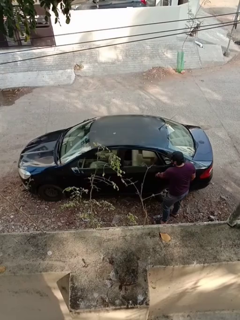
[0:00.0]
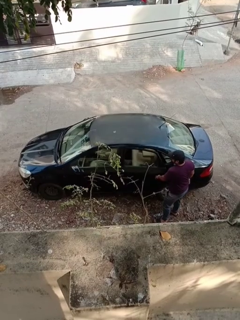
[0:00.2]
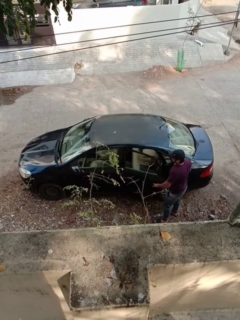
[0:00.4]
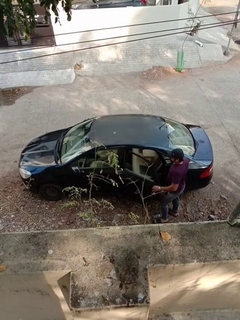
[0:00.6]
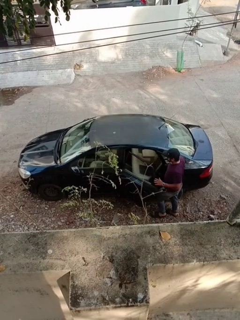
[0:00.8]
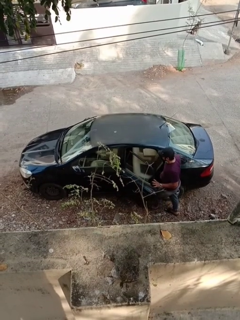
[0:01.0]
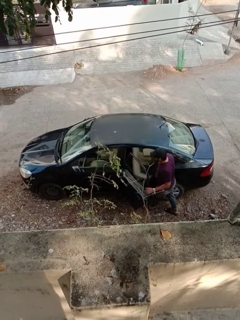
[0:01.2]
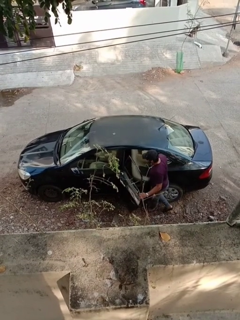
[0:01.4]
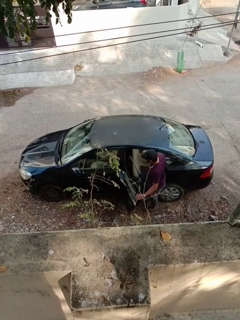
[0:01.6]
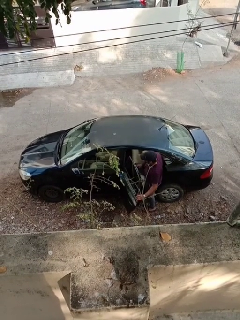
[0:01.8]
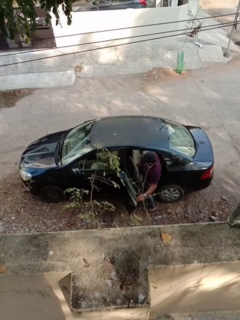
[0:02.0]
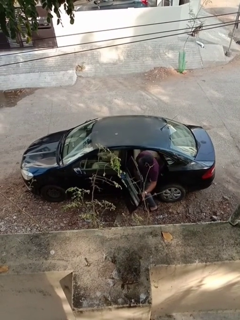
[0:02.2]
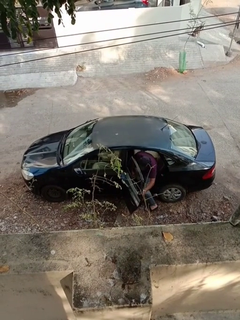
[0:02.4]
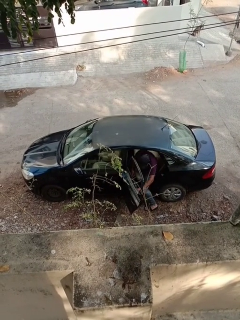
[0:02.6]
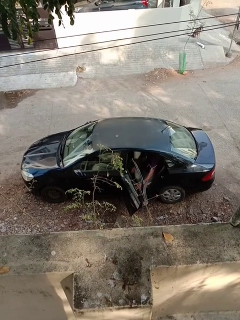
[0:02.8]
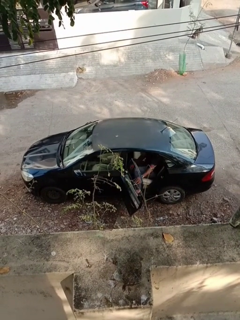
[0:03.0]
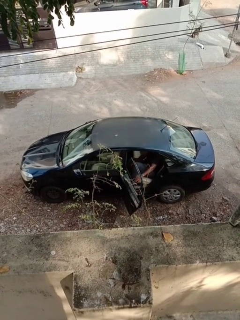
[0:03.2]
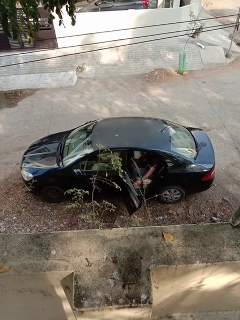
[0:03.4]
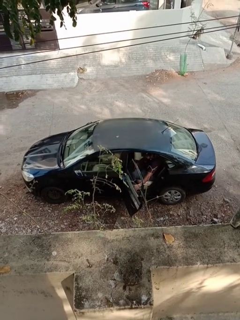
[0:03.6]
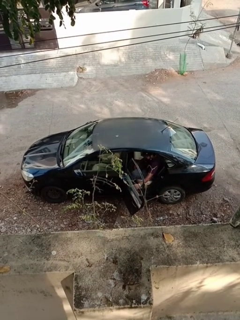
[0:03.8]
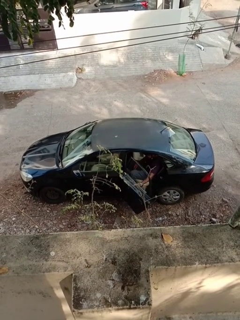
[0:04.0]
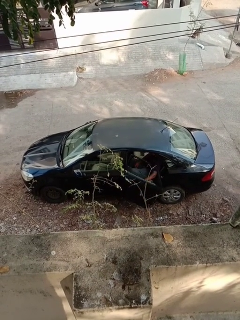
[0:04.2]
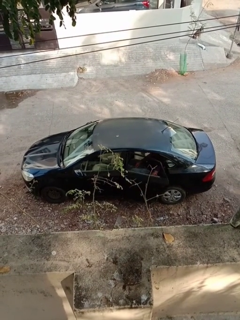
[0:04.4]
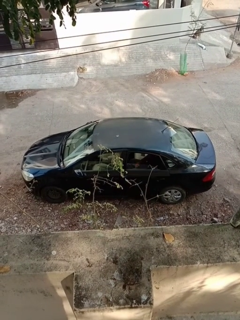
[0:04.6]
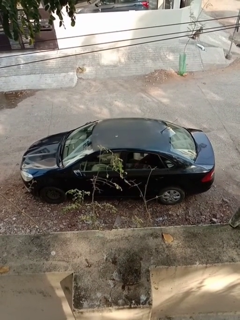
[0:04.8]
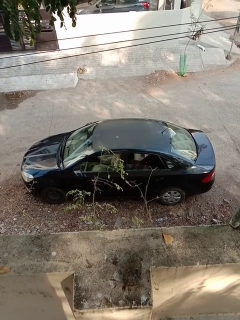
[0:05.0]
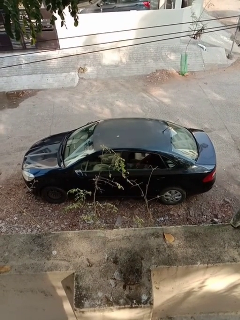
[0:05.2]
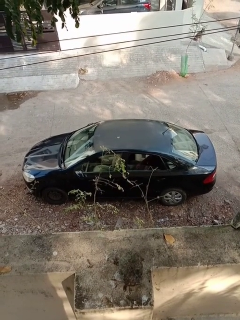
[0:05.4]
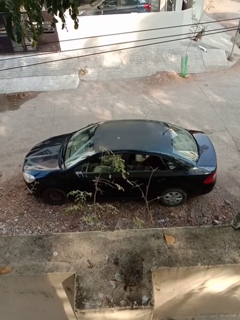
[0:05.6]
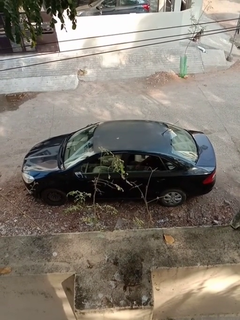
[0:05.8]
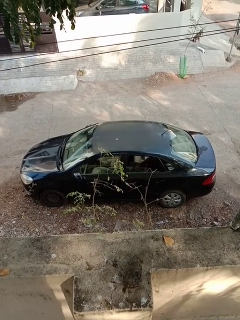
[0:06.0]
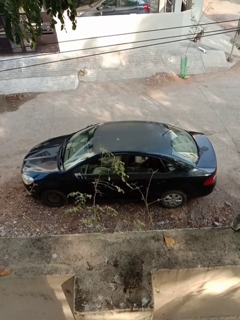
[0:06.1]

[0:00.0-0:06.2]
car picks up person

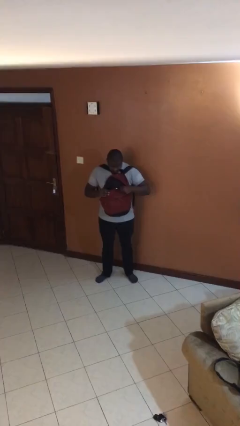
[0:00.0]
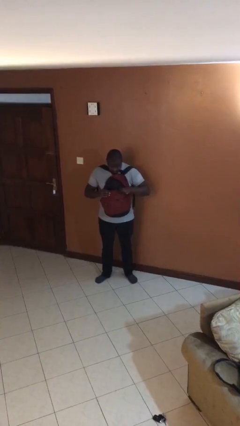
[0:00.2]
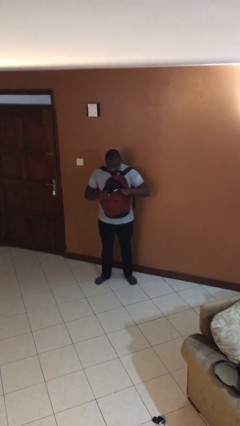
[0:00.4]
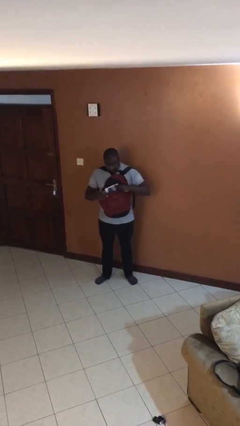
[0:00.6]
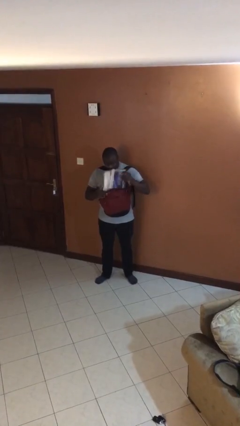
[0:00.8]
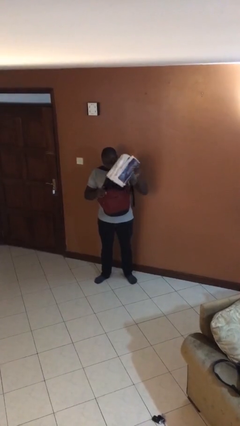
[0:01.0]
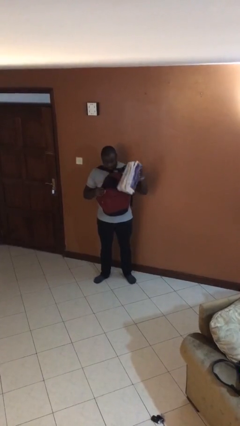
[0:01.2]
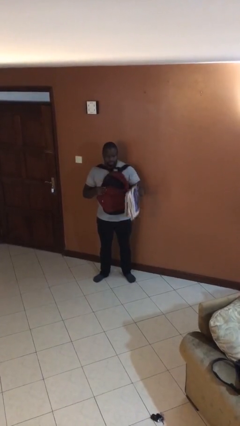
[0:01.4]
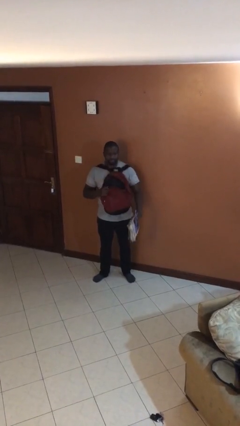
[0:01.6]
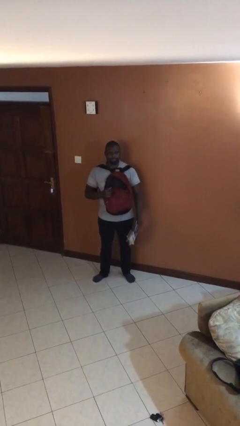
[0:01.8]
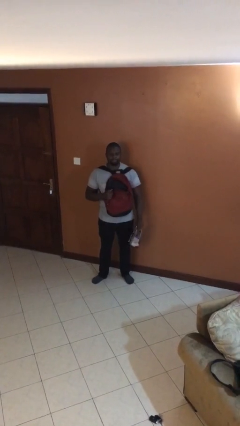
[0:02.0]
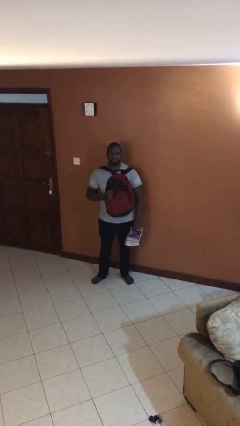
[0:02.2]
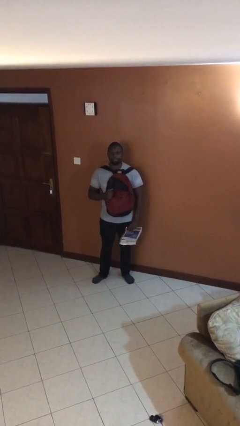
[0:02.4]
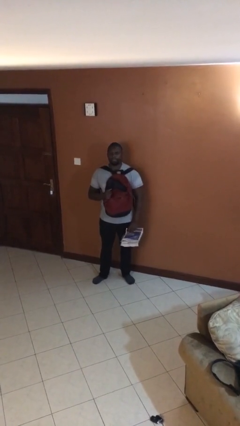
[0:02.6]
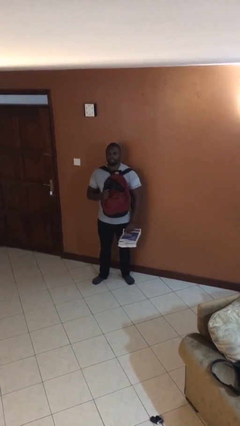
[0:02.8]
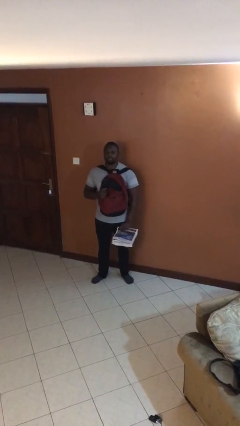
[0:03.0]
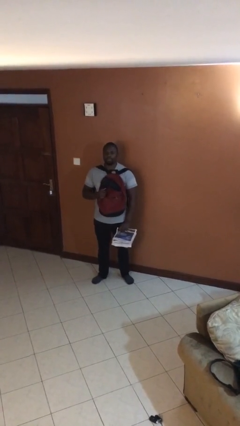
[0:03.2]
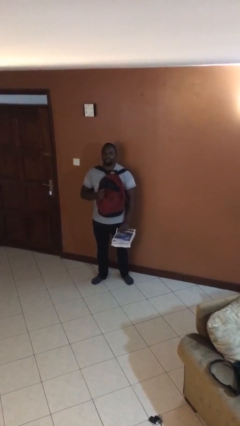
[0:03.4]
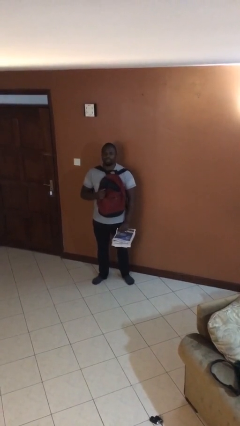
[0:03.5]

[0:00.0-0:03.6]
person takes object from backpack

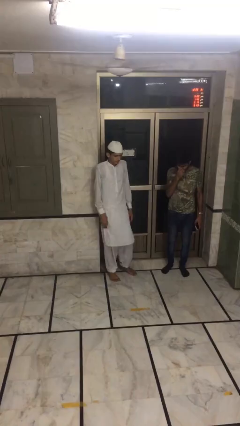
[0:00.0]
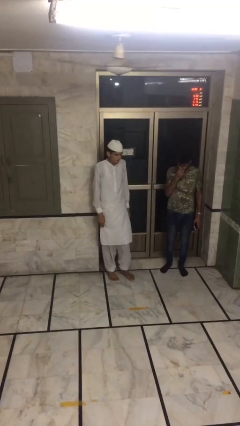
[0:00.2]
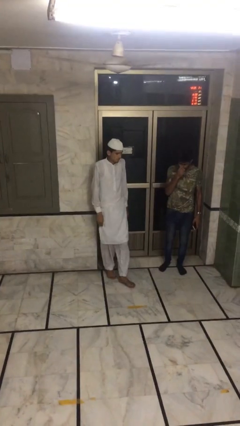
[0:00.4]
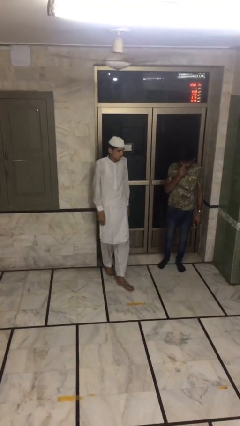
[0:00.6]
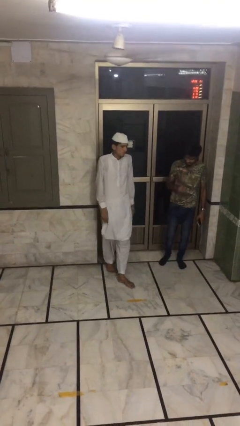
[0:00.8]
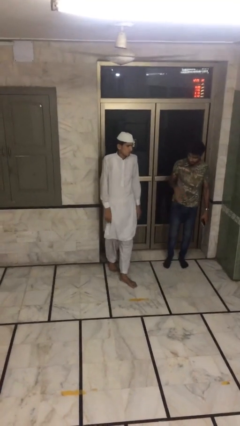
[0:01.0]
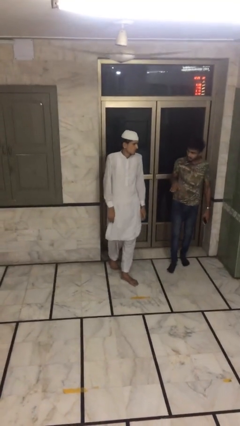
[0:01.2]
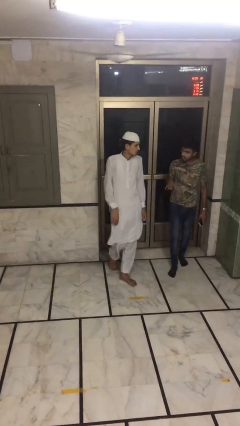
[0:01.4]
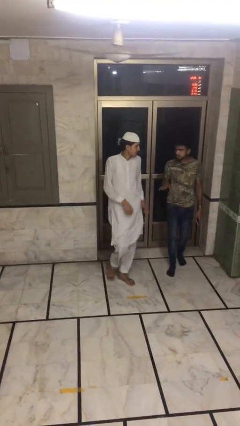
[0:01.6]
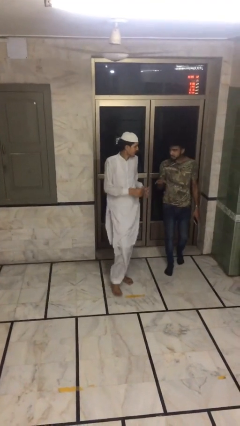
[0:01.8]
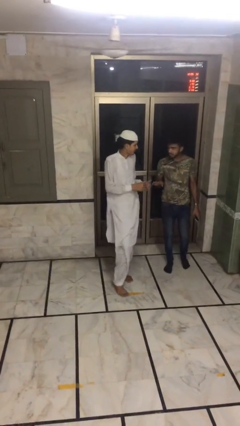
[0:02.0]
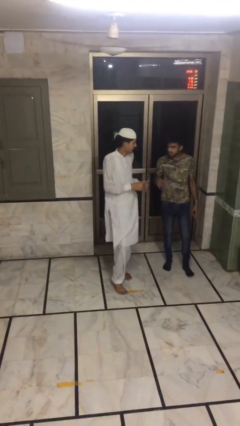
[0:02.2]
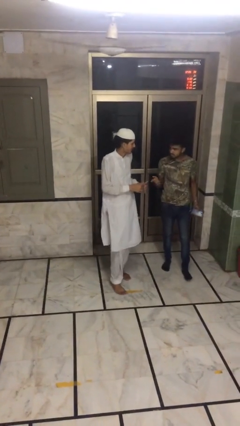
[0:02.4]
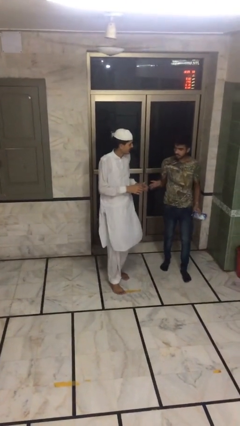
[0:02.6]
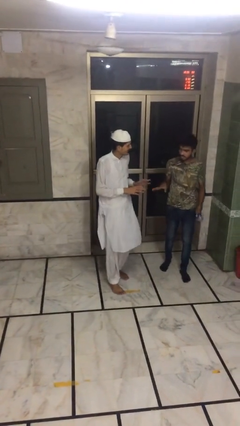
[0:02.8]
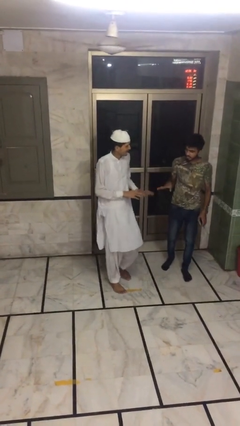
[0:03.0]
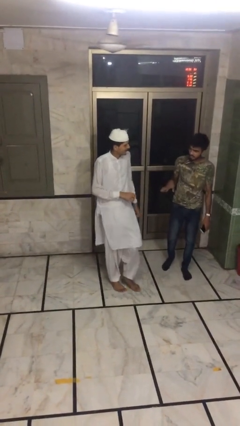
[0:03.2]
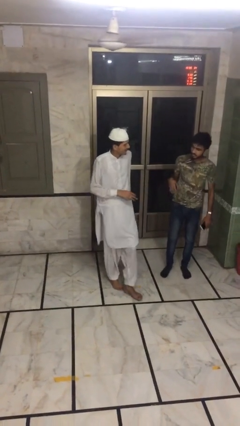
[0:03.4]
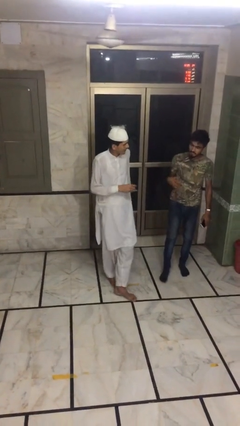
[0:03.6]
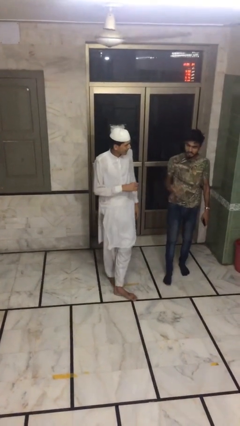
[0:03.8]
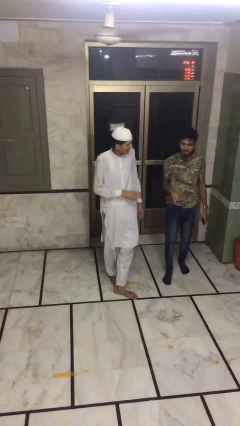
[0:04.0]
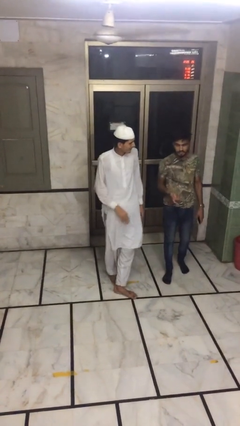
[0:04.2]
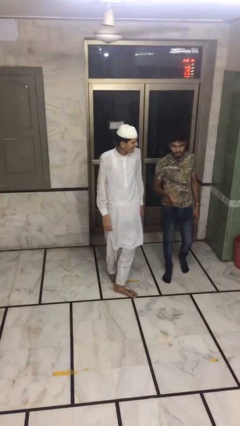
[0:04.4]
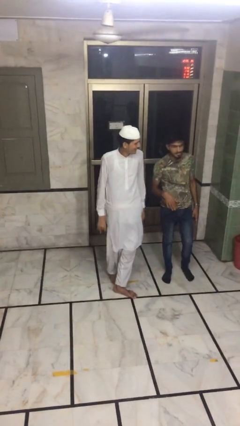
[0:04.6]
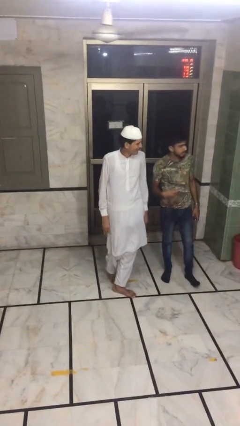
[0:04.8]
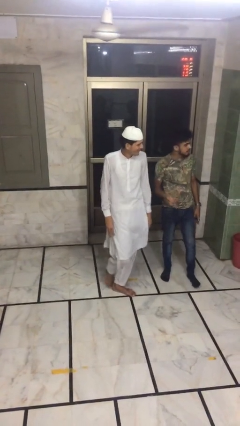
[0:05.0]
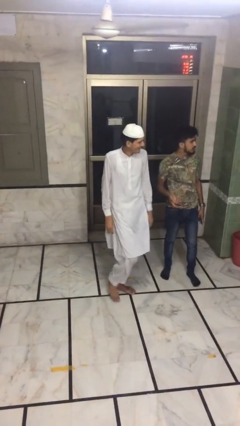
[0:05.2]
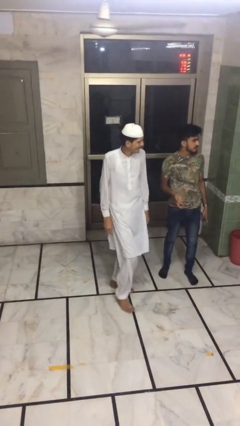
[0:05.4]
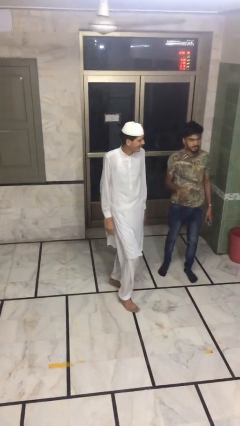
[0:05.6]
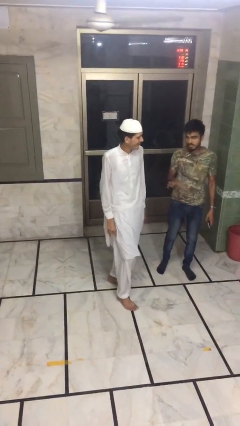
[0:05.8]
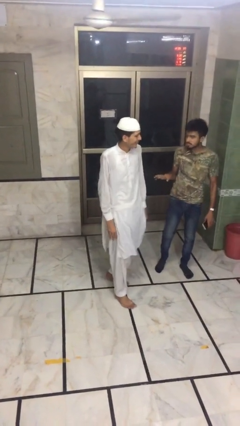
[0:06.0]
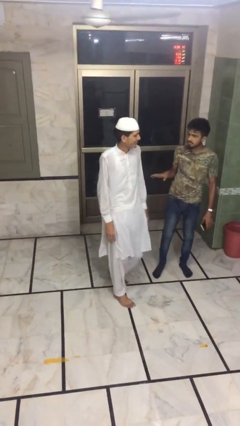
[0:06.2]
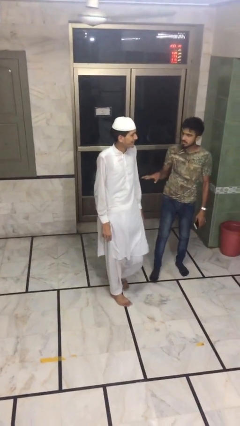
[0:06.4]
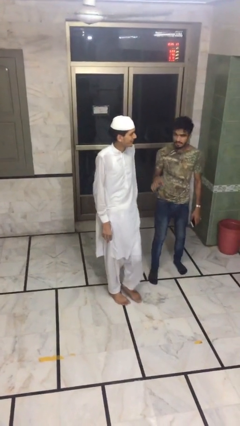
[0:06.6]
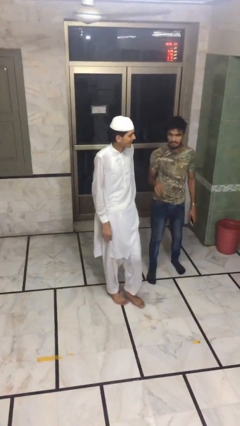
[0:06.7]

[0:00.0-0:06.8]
person talks to person

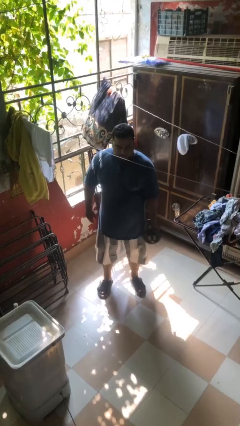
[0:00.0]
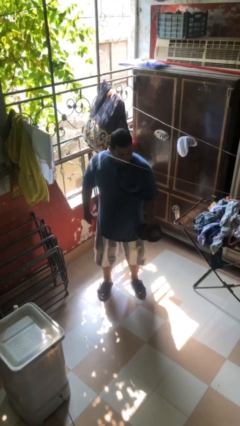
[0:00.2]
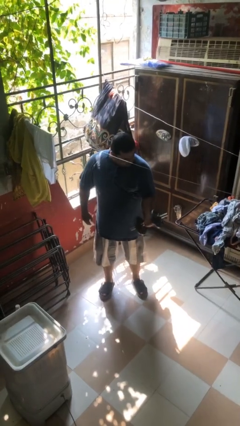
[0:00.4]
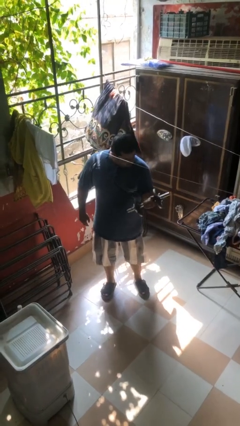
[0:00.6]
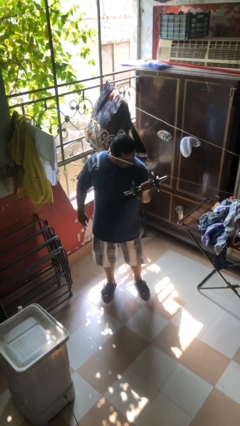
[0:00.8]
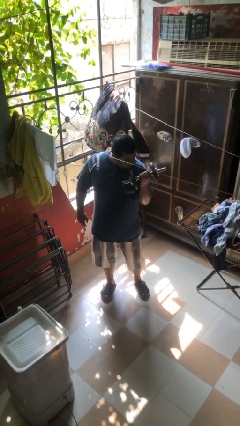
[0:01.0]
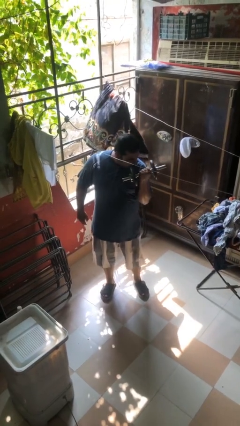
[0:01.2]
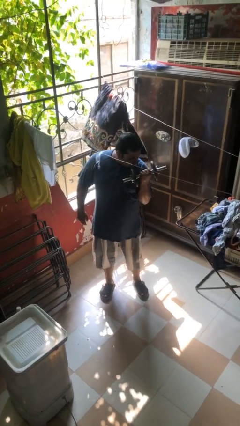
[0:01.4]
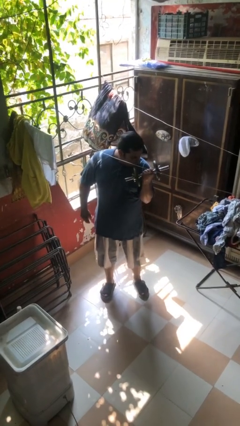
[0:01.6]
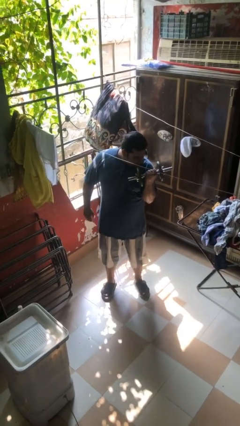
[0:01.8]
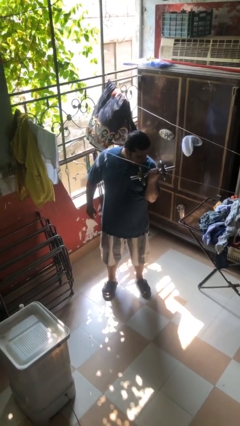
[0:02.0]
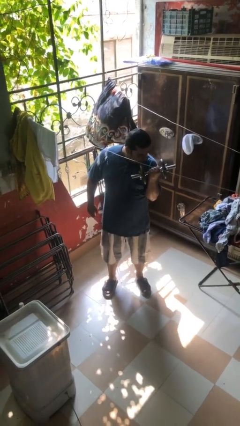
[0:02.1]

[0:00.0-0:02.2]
person lifts dumbbells

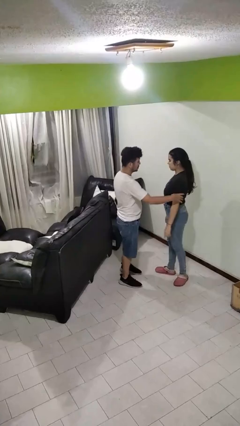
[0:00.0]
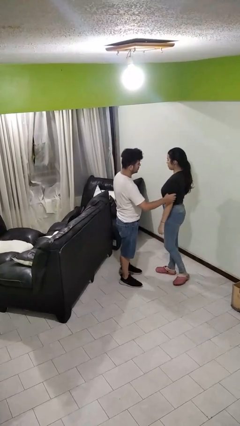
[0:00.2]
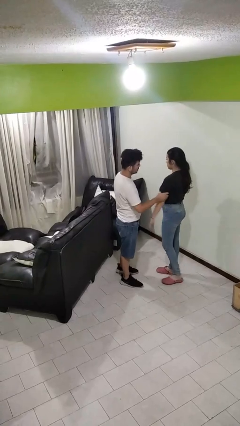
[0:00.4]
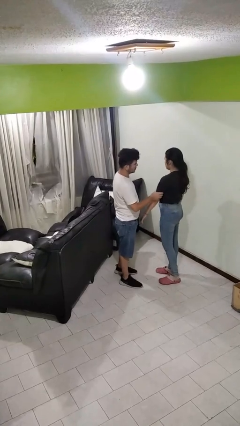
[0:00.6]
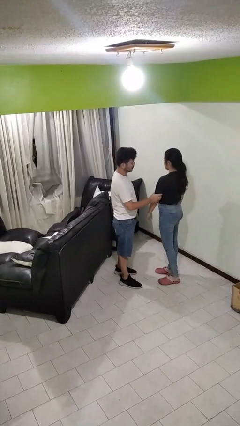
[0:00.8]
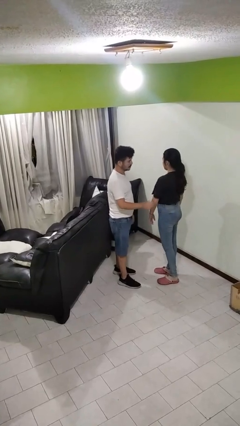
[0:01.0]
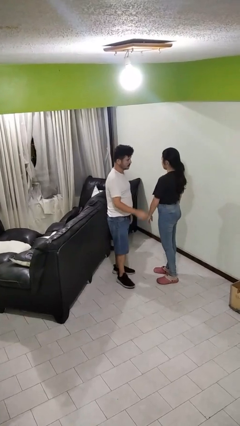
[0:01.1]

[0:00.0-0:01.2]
person grabs person by bicep
